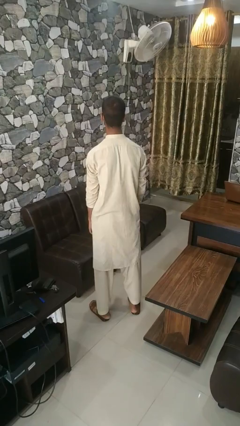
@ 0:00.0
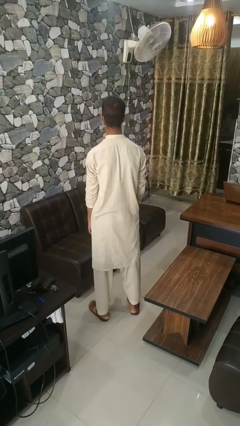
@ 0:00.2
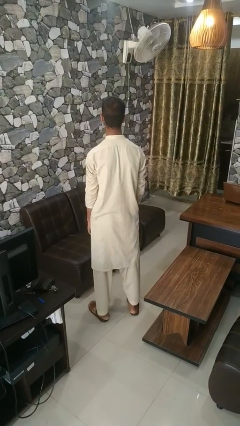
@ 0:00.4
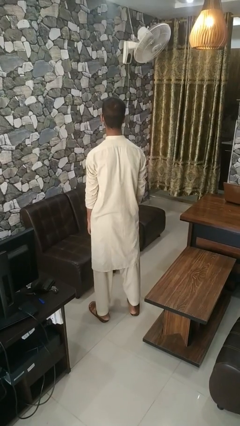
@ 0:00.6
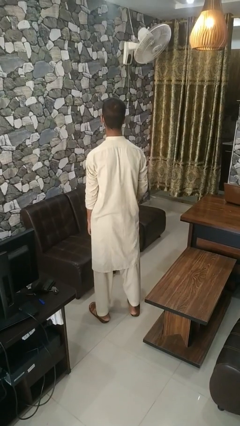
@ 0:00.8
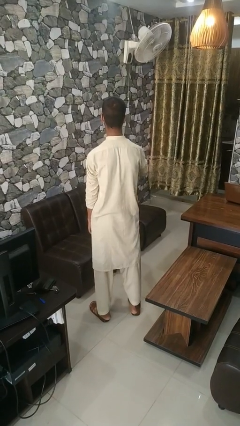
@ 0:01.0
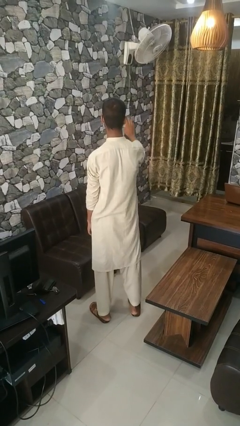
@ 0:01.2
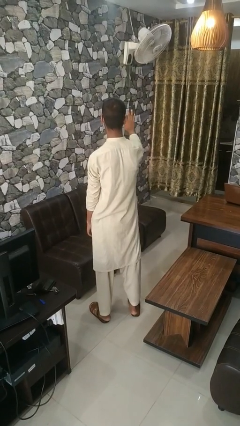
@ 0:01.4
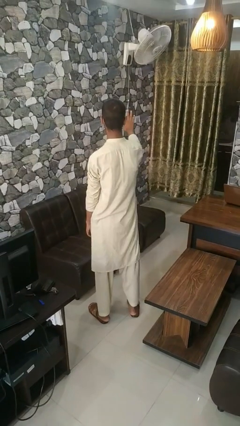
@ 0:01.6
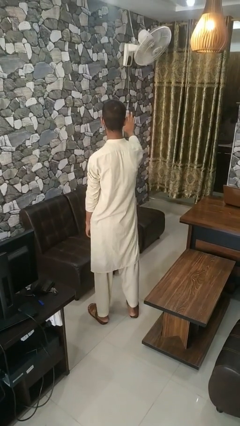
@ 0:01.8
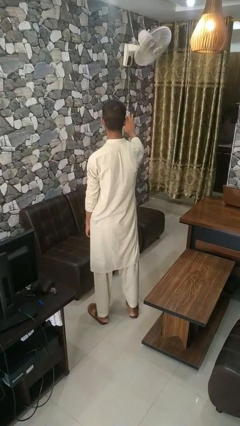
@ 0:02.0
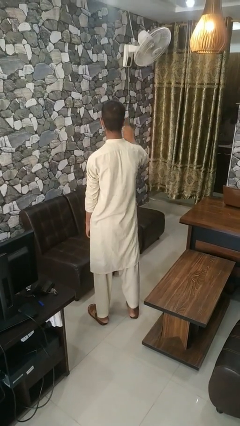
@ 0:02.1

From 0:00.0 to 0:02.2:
person gestures number four

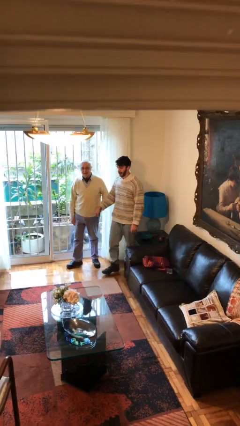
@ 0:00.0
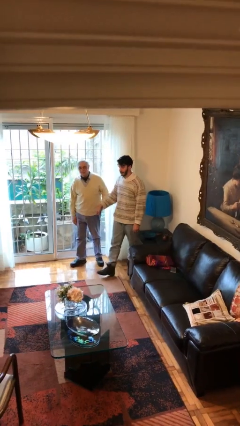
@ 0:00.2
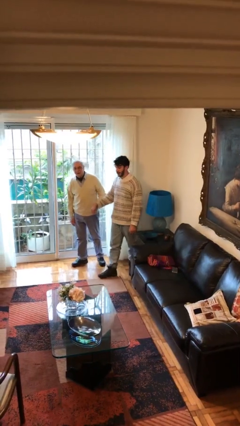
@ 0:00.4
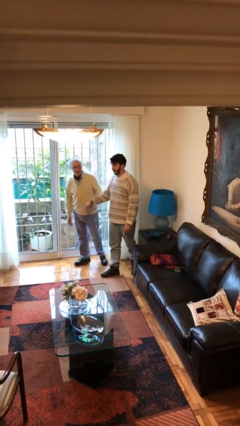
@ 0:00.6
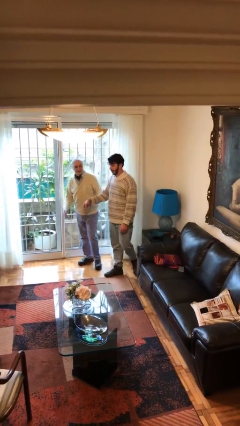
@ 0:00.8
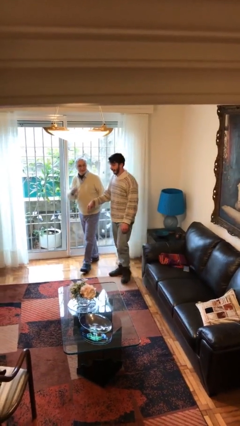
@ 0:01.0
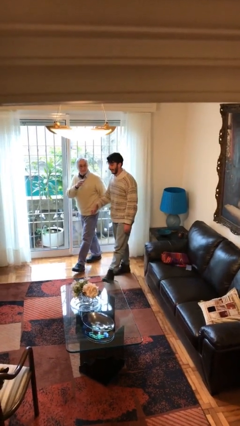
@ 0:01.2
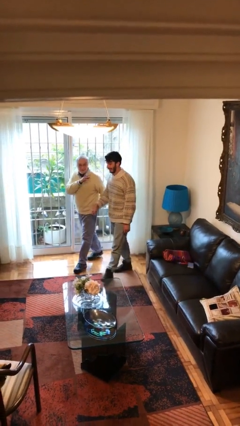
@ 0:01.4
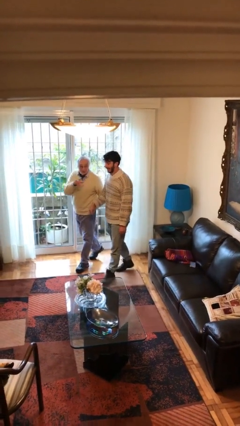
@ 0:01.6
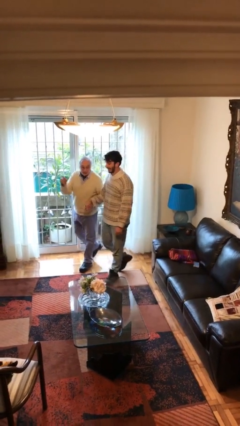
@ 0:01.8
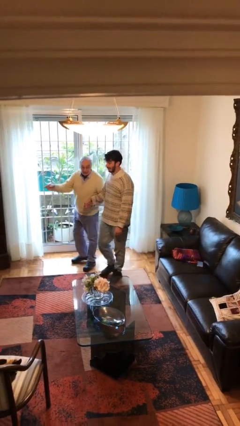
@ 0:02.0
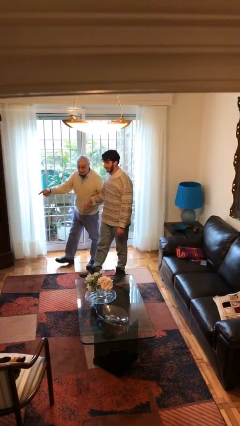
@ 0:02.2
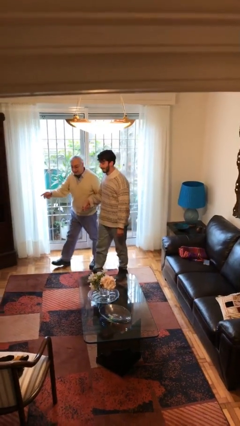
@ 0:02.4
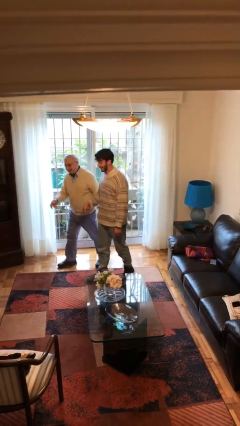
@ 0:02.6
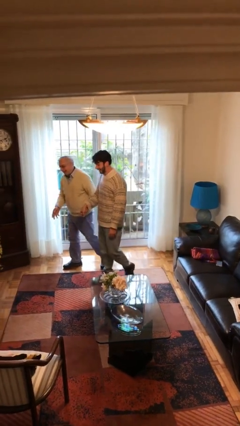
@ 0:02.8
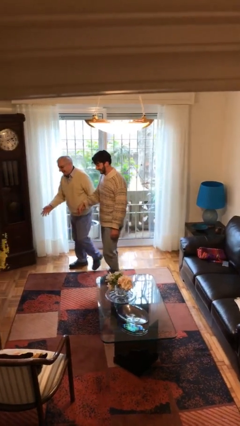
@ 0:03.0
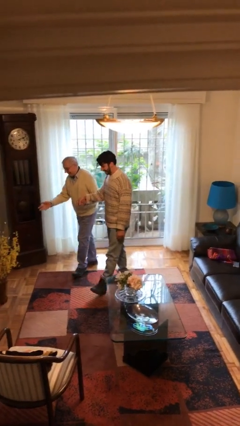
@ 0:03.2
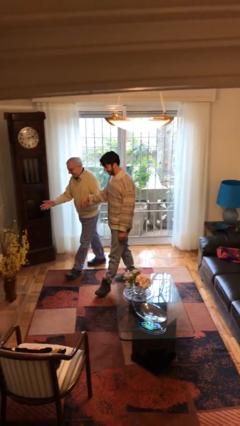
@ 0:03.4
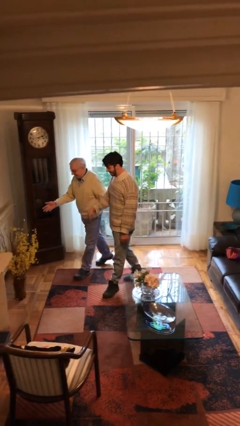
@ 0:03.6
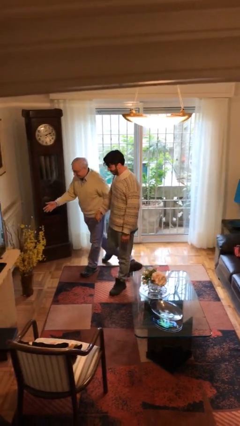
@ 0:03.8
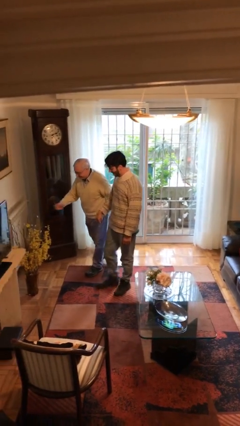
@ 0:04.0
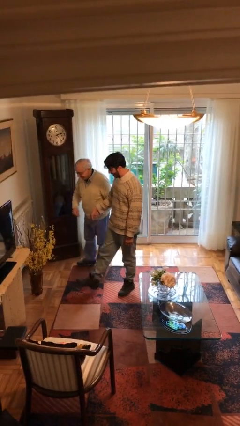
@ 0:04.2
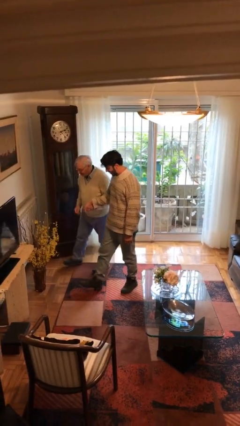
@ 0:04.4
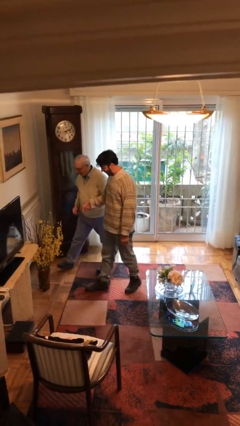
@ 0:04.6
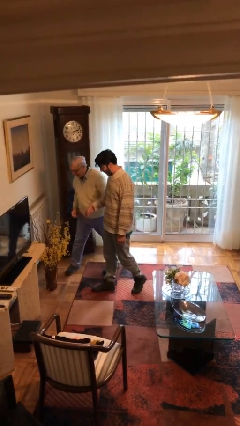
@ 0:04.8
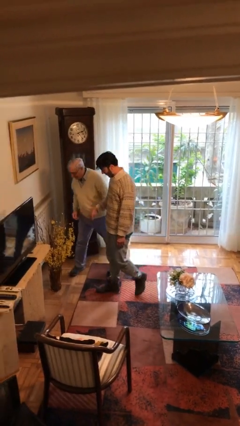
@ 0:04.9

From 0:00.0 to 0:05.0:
person holds hand

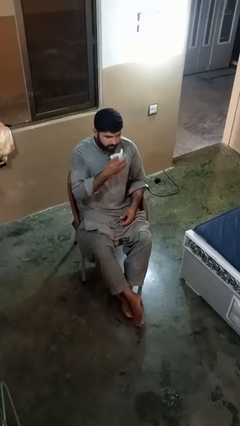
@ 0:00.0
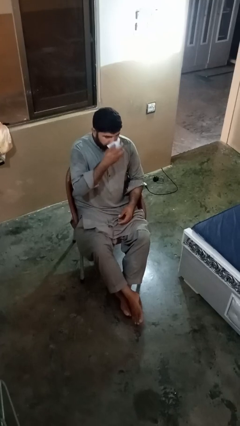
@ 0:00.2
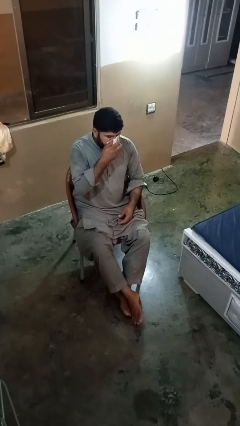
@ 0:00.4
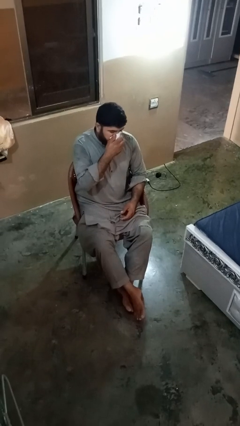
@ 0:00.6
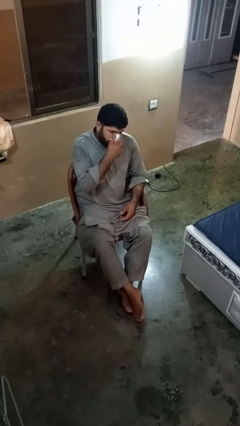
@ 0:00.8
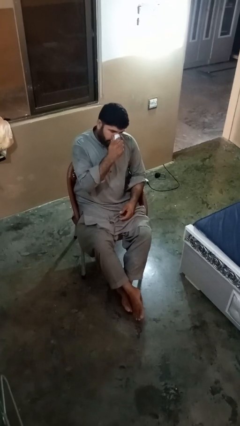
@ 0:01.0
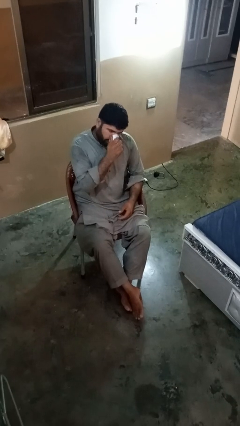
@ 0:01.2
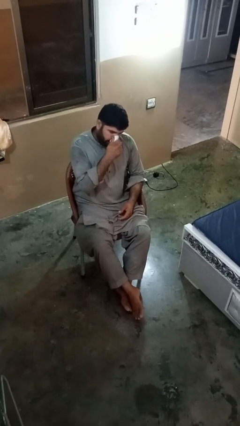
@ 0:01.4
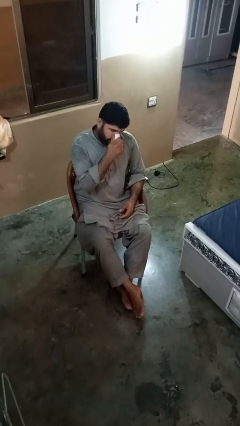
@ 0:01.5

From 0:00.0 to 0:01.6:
person blows nose

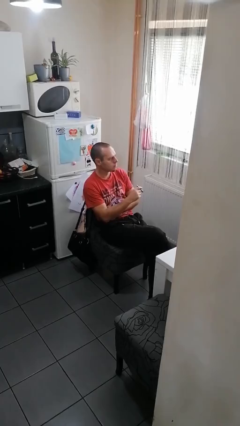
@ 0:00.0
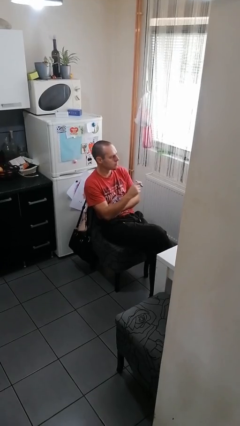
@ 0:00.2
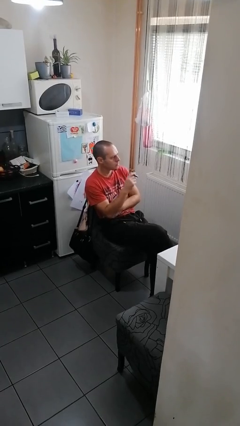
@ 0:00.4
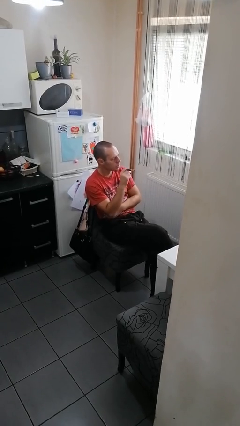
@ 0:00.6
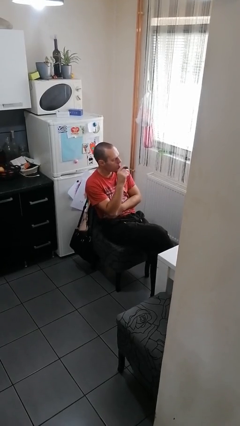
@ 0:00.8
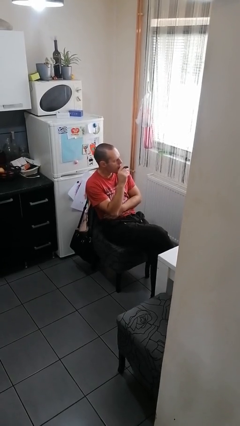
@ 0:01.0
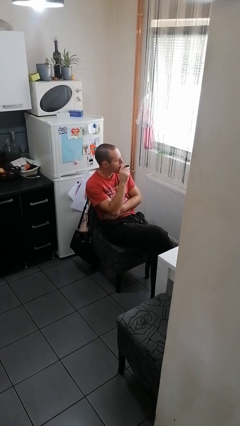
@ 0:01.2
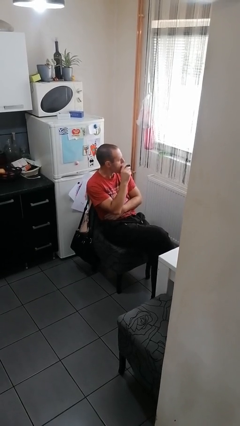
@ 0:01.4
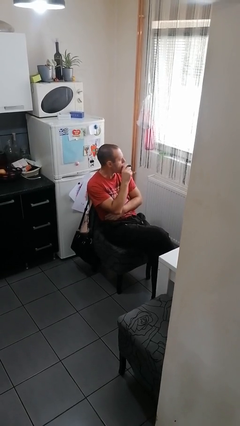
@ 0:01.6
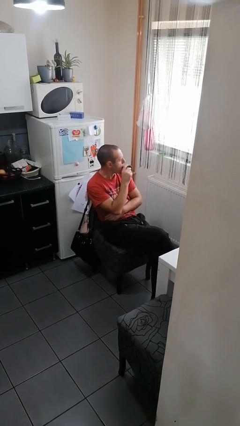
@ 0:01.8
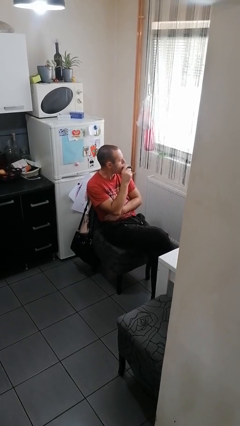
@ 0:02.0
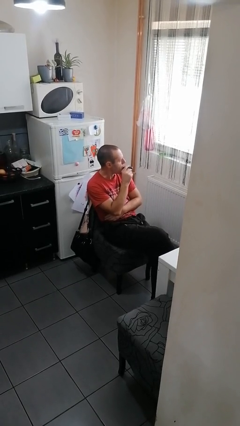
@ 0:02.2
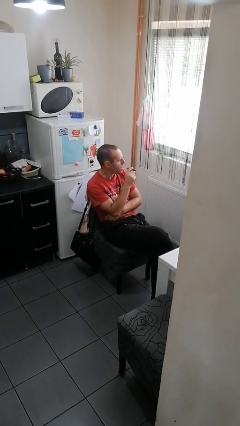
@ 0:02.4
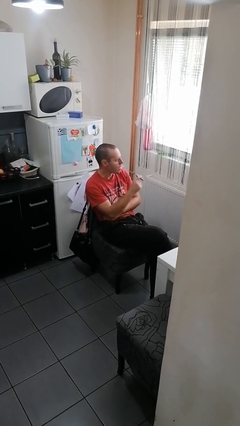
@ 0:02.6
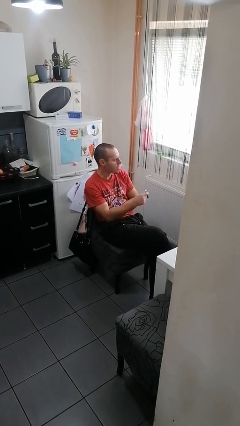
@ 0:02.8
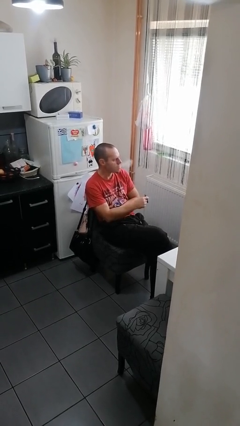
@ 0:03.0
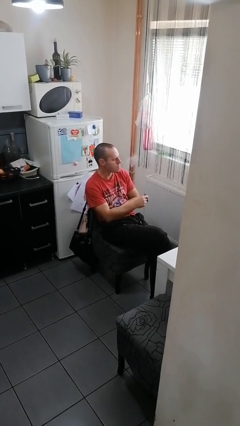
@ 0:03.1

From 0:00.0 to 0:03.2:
person vapes

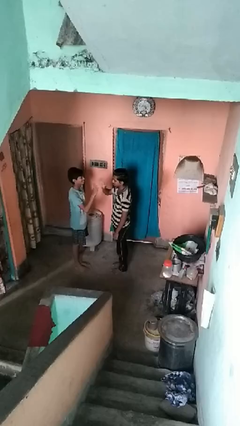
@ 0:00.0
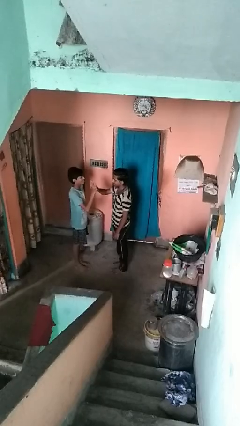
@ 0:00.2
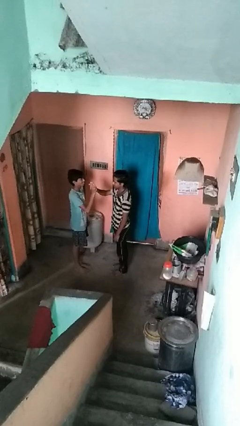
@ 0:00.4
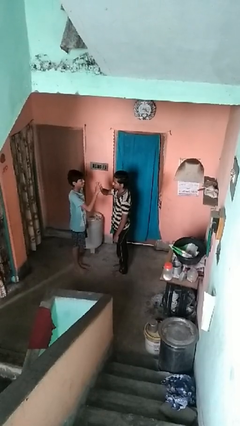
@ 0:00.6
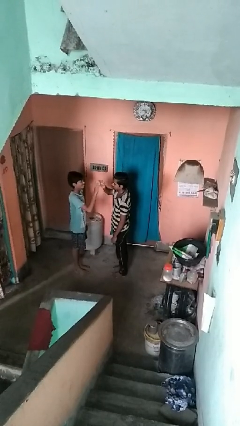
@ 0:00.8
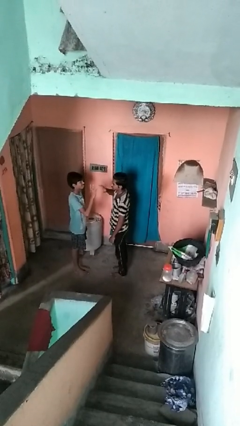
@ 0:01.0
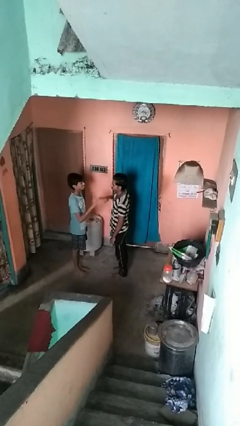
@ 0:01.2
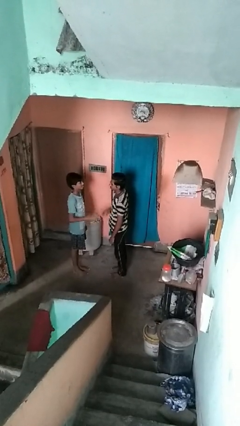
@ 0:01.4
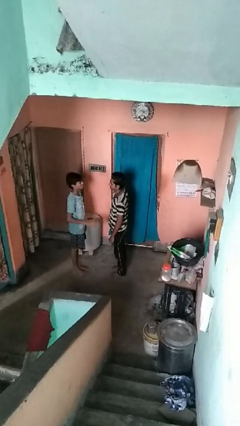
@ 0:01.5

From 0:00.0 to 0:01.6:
person highfives hand

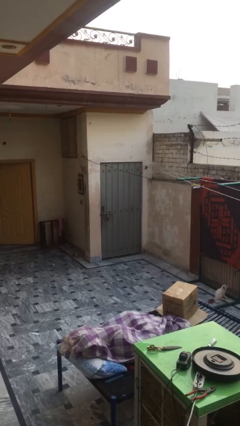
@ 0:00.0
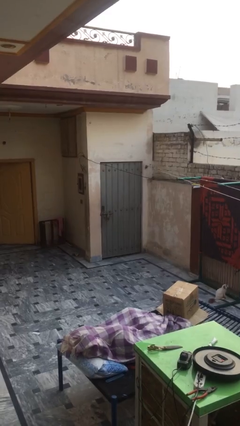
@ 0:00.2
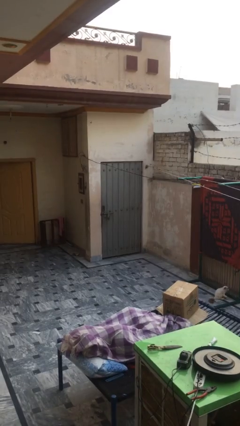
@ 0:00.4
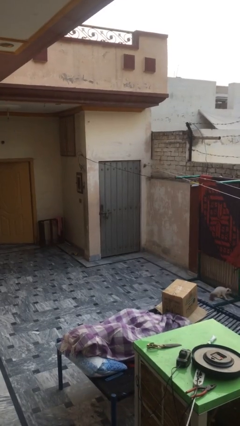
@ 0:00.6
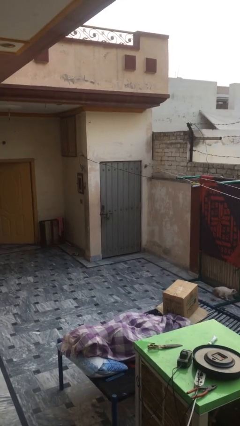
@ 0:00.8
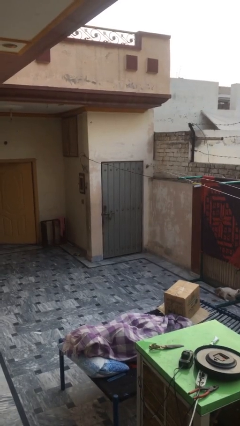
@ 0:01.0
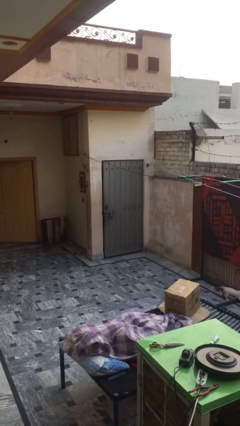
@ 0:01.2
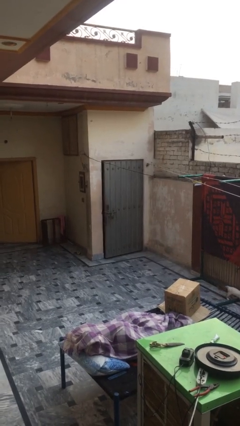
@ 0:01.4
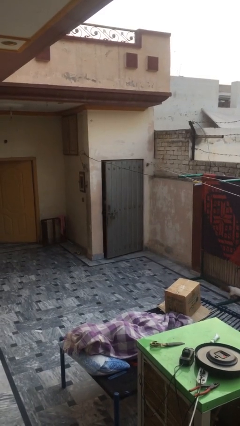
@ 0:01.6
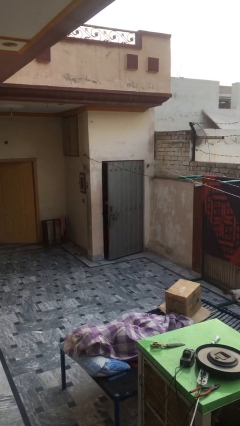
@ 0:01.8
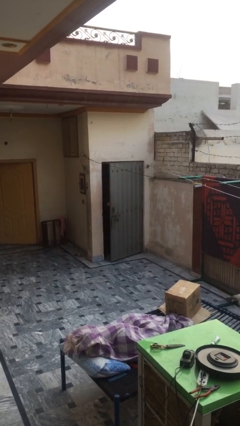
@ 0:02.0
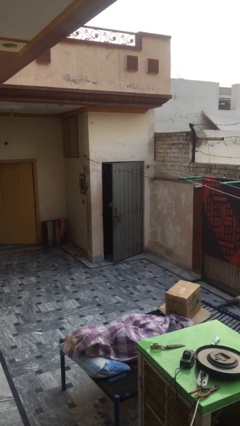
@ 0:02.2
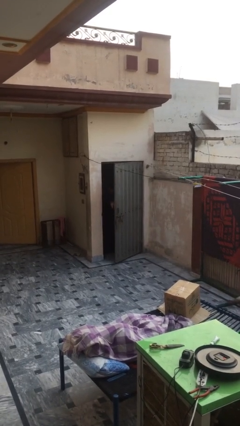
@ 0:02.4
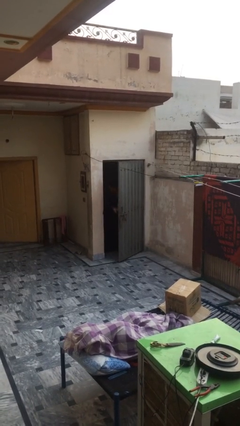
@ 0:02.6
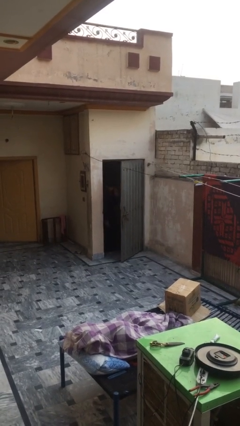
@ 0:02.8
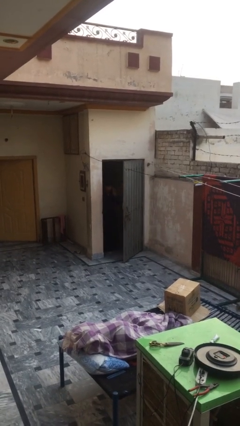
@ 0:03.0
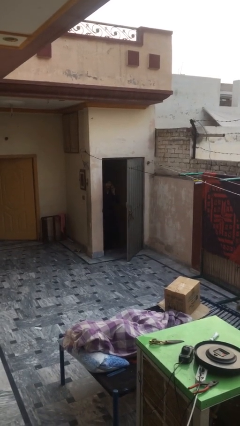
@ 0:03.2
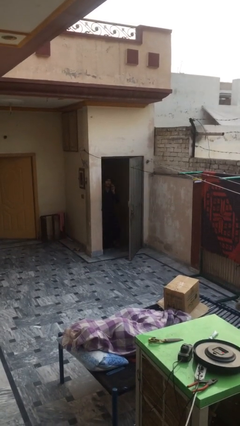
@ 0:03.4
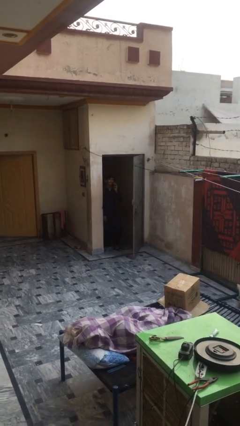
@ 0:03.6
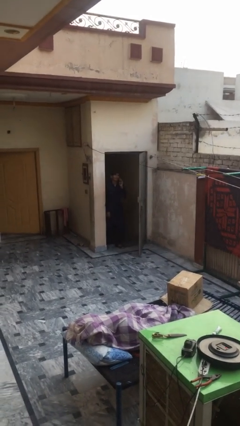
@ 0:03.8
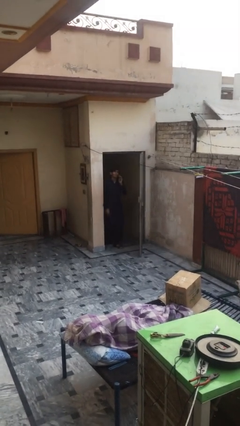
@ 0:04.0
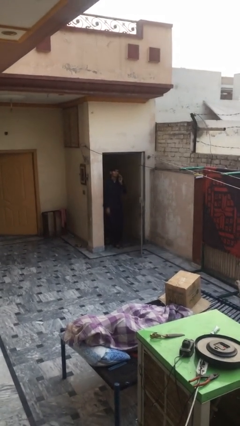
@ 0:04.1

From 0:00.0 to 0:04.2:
person opens facility door
